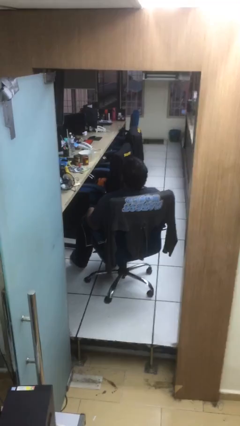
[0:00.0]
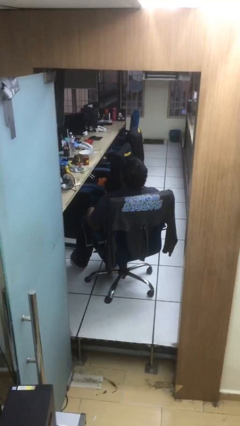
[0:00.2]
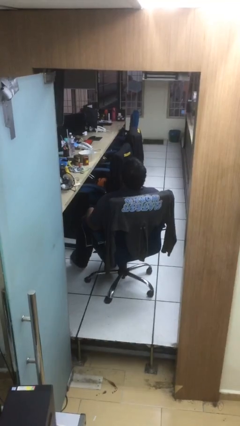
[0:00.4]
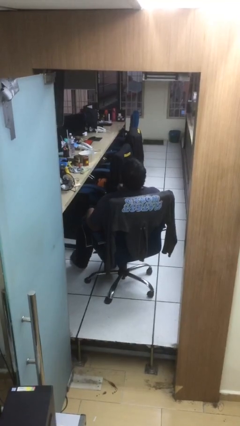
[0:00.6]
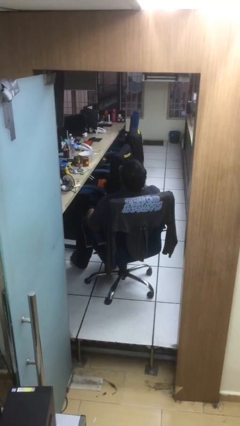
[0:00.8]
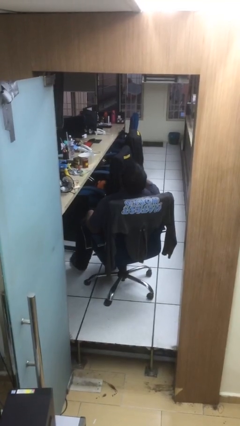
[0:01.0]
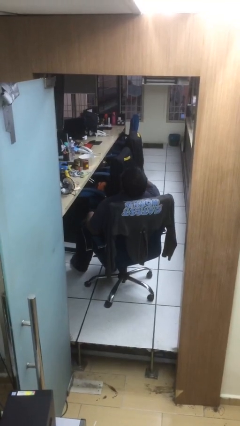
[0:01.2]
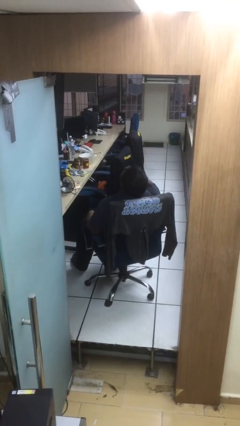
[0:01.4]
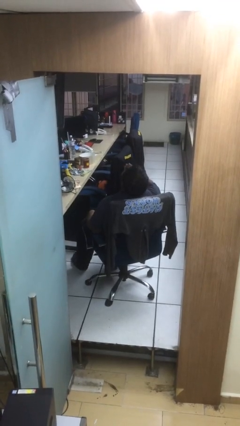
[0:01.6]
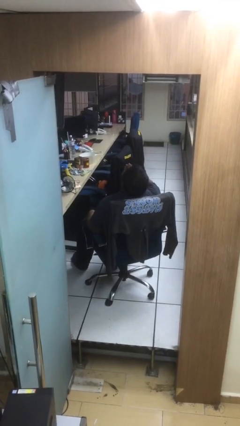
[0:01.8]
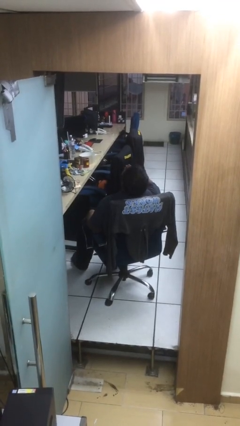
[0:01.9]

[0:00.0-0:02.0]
person yawns

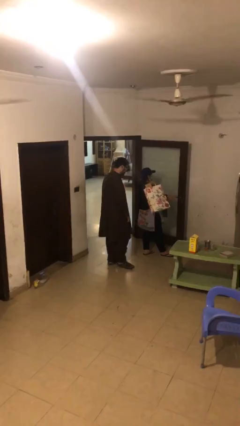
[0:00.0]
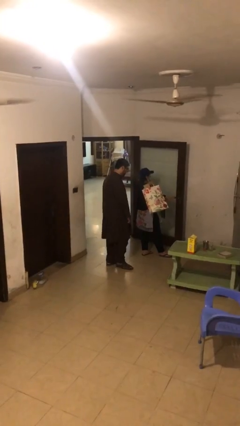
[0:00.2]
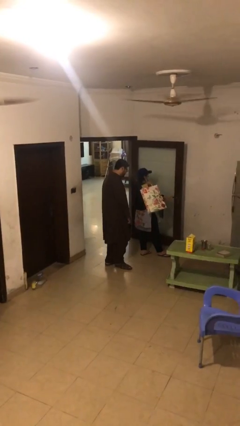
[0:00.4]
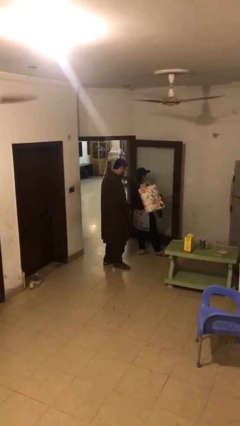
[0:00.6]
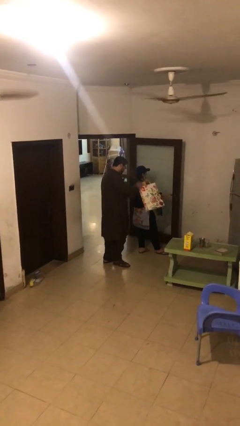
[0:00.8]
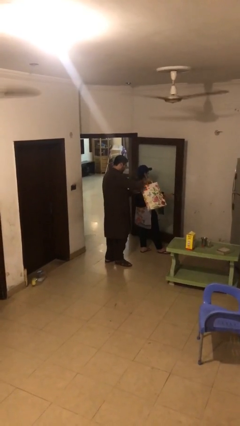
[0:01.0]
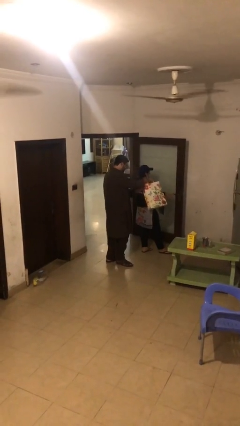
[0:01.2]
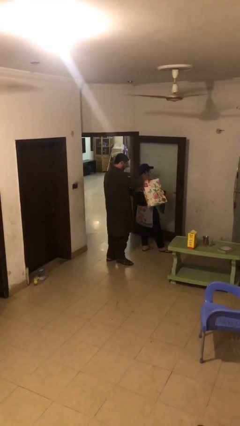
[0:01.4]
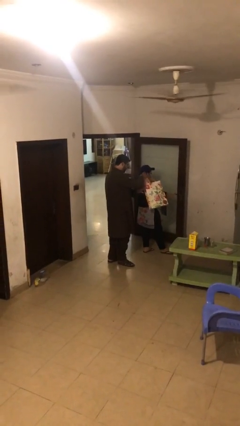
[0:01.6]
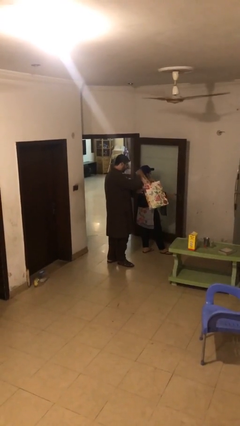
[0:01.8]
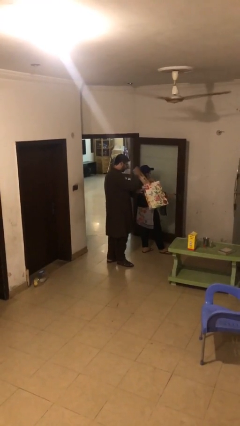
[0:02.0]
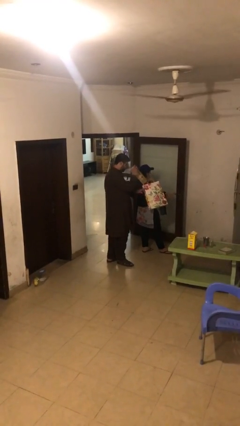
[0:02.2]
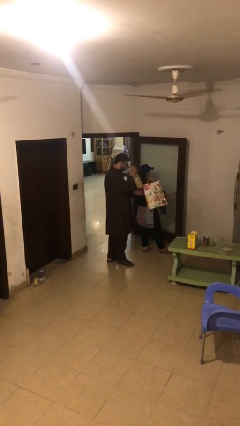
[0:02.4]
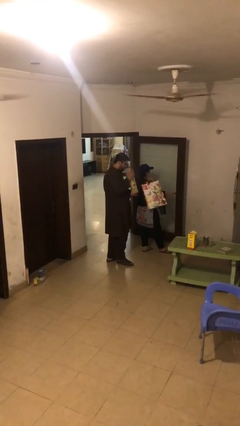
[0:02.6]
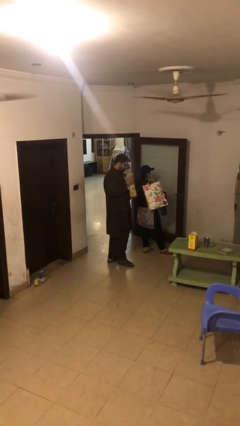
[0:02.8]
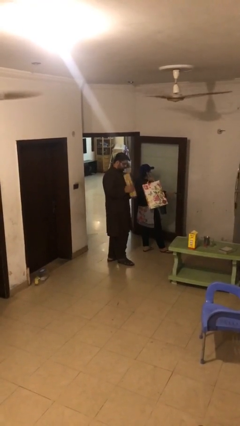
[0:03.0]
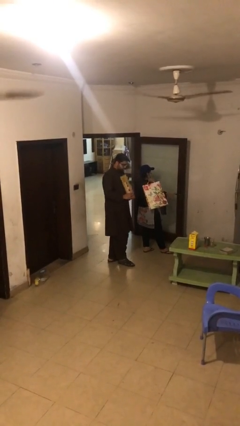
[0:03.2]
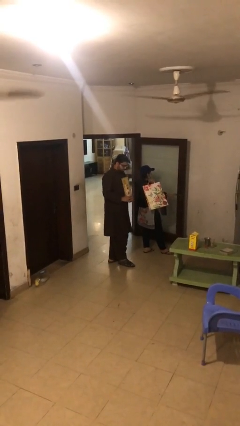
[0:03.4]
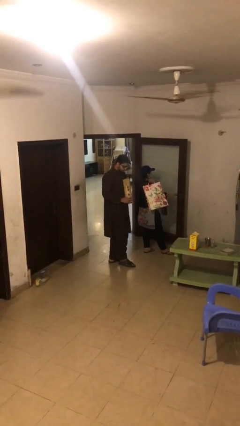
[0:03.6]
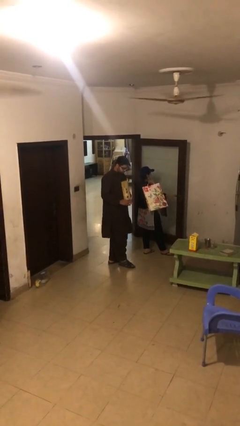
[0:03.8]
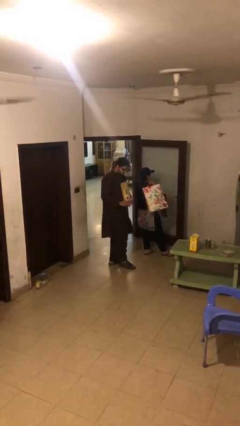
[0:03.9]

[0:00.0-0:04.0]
person steals object from person

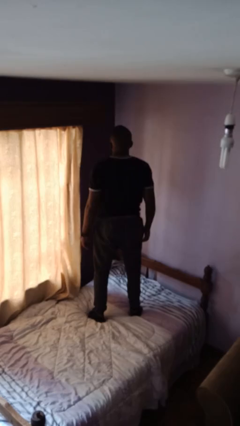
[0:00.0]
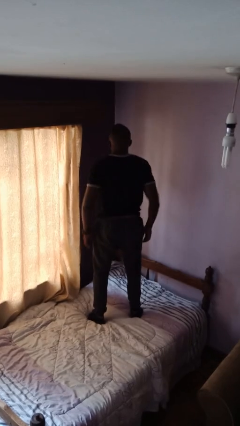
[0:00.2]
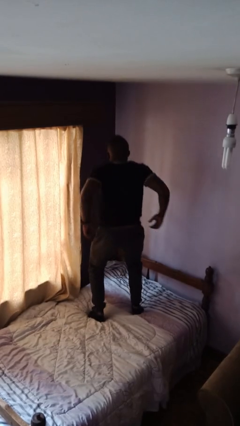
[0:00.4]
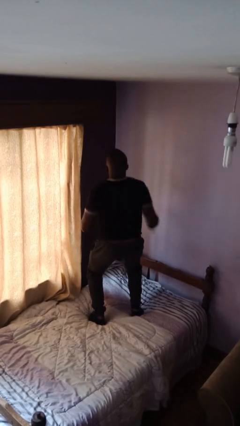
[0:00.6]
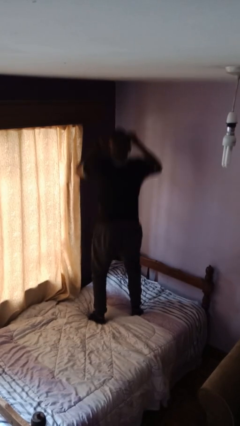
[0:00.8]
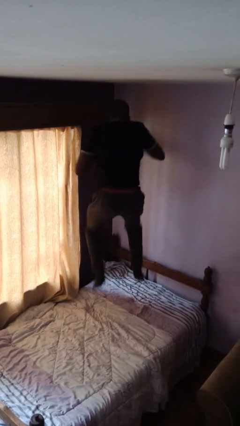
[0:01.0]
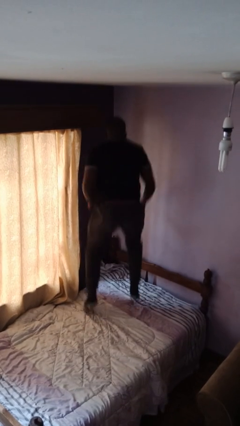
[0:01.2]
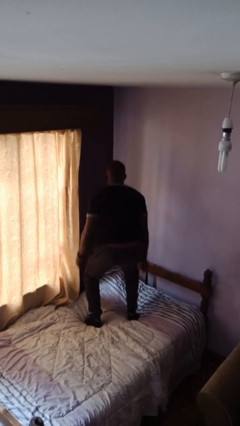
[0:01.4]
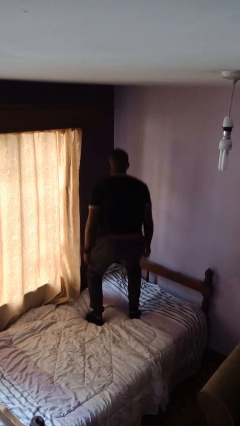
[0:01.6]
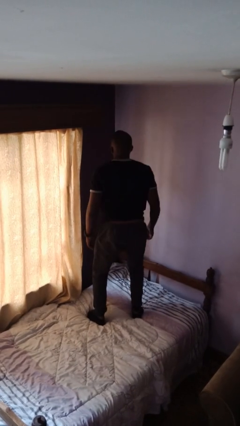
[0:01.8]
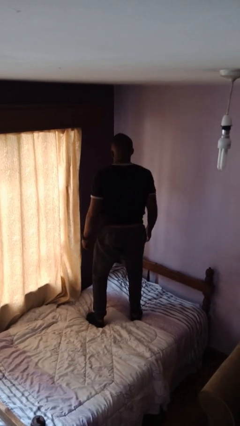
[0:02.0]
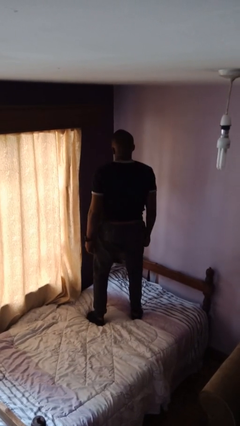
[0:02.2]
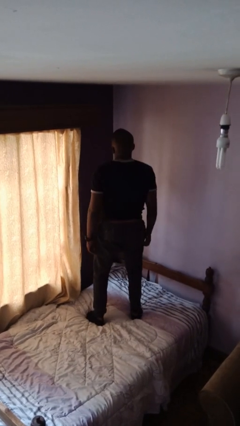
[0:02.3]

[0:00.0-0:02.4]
person jumps on bed

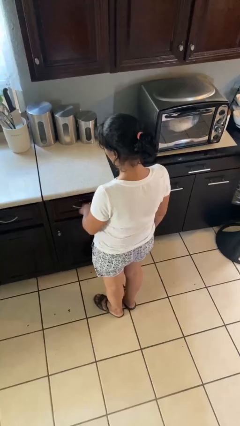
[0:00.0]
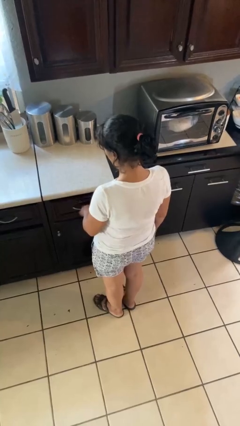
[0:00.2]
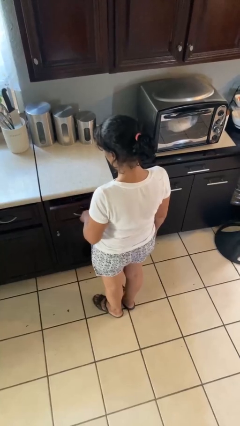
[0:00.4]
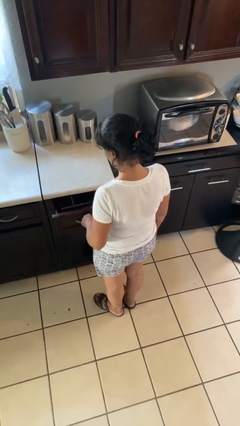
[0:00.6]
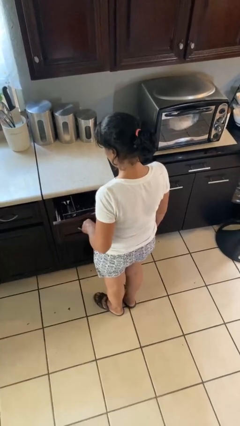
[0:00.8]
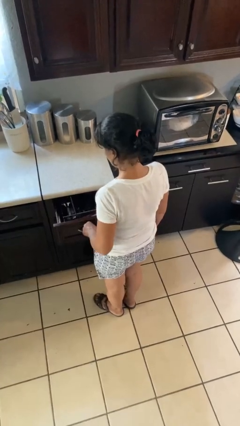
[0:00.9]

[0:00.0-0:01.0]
person opens kitchen drawer

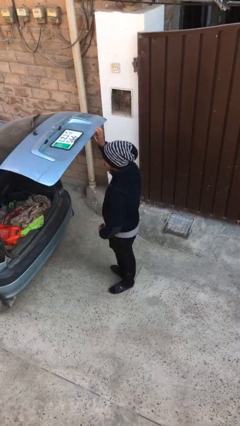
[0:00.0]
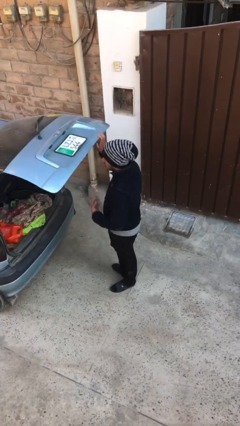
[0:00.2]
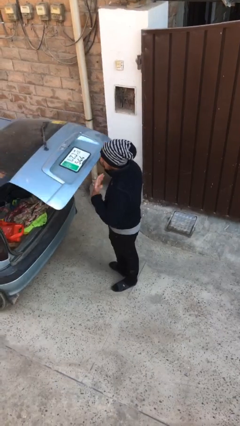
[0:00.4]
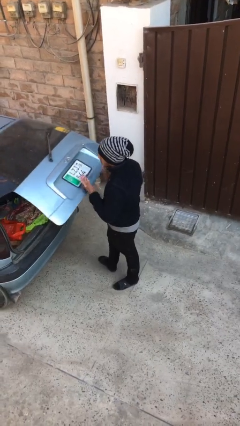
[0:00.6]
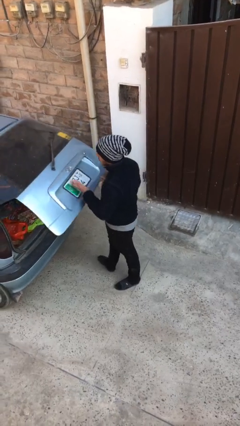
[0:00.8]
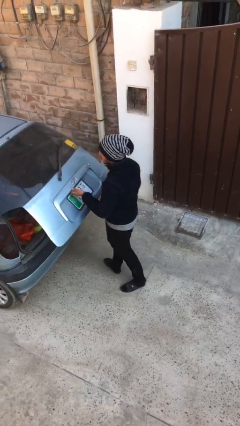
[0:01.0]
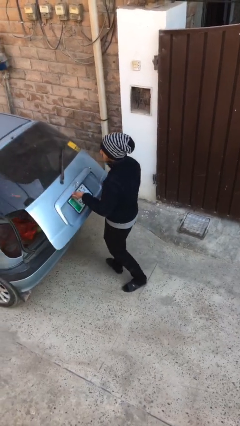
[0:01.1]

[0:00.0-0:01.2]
person closes car trunk

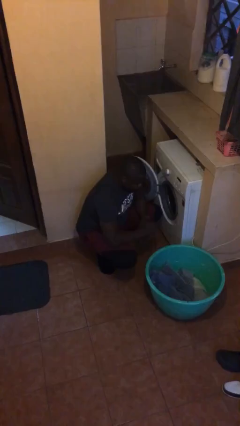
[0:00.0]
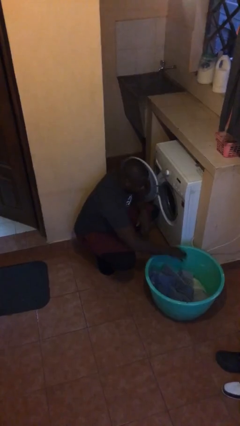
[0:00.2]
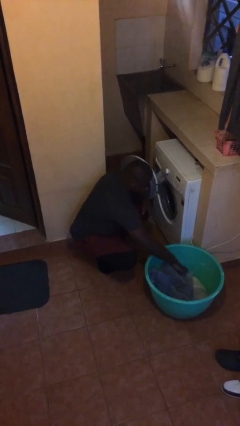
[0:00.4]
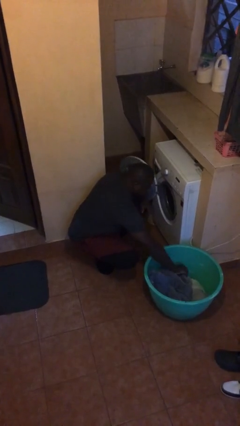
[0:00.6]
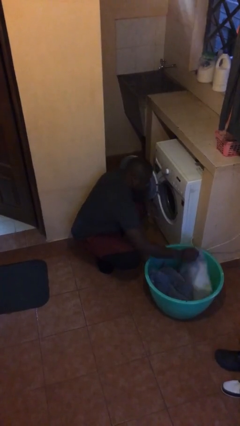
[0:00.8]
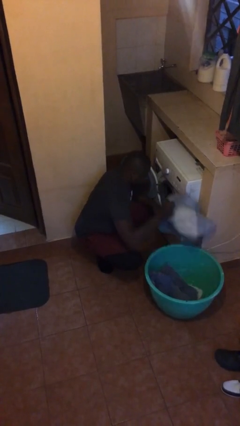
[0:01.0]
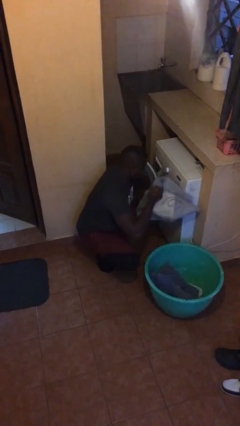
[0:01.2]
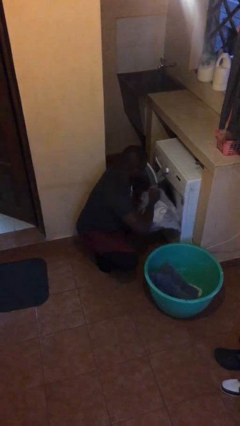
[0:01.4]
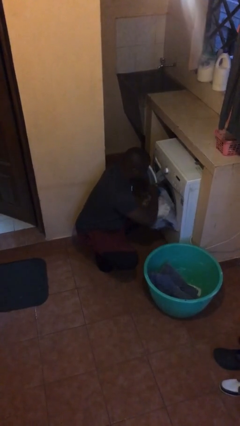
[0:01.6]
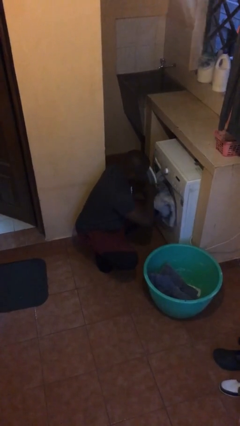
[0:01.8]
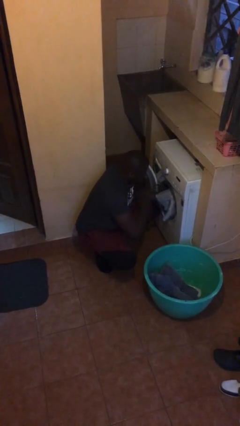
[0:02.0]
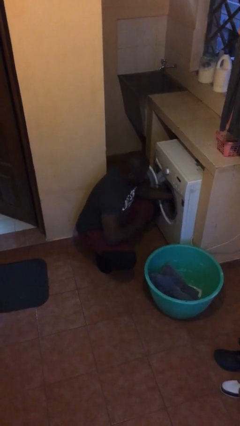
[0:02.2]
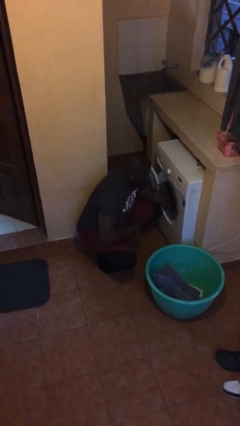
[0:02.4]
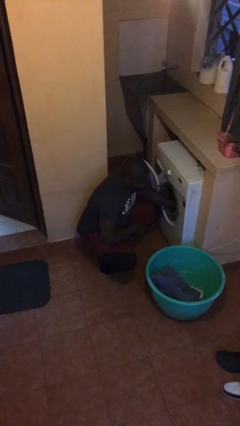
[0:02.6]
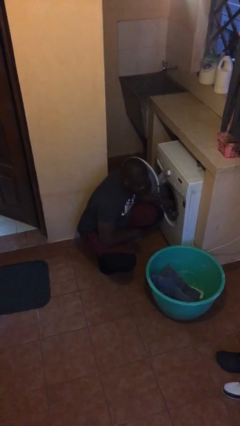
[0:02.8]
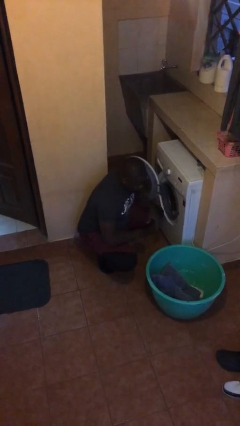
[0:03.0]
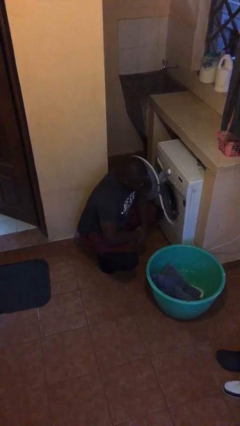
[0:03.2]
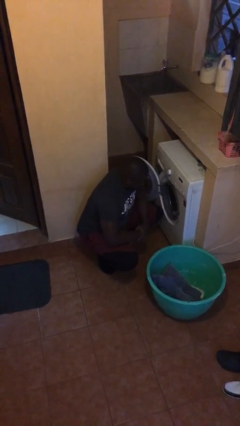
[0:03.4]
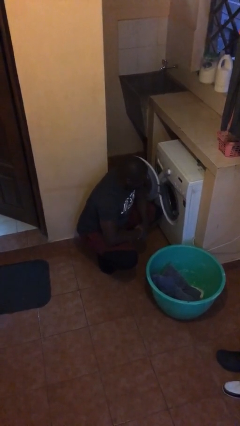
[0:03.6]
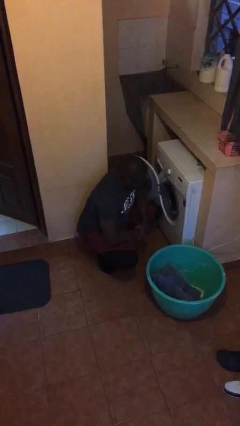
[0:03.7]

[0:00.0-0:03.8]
person loads dryer

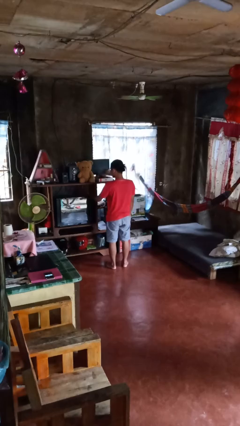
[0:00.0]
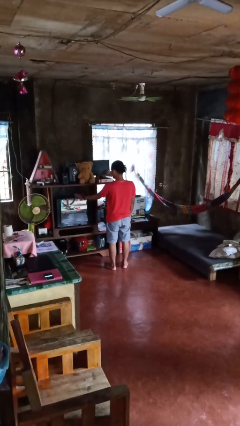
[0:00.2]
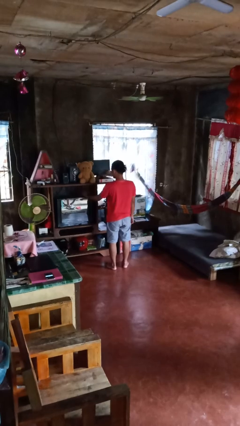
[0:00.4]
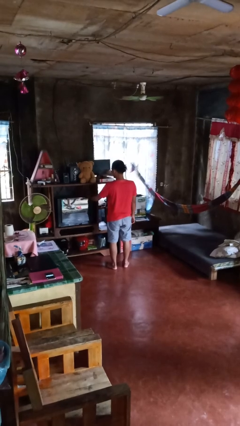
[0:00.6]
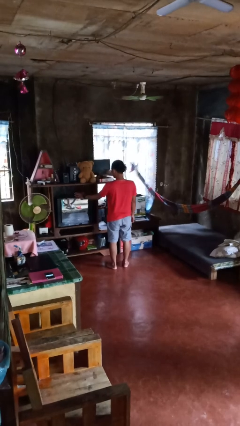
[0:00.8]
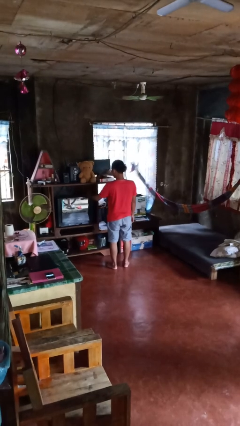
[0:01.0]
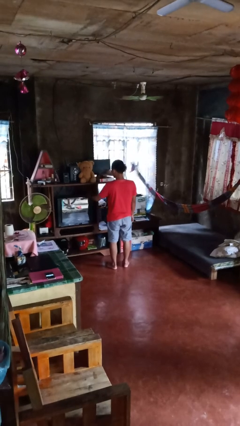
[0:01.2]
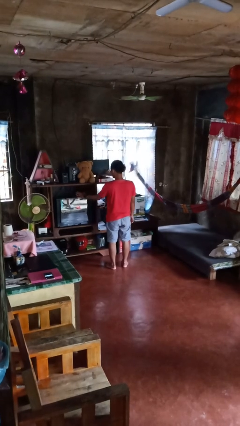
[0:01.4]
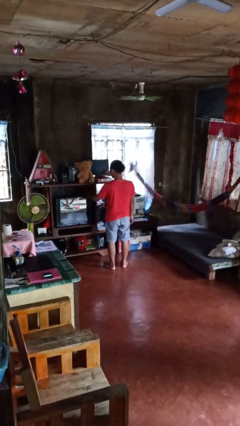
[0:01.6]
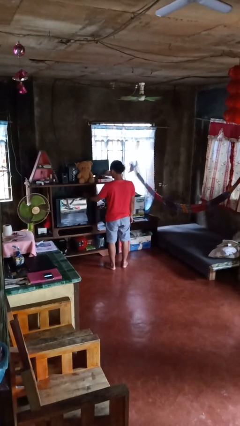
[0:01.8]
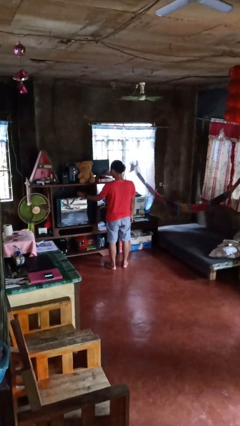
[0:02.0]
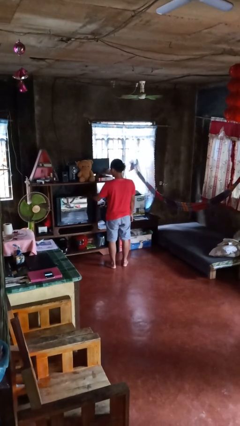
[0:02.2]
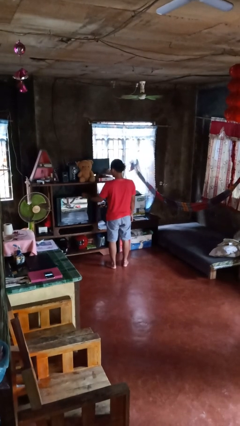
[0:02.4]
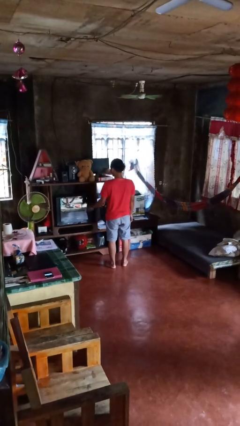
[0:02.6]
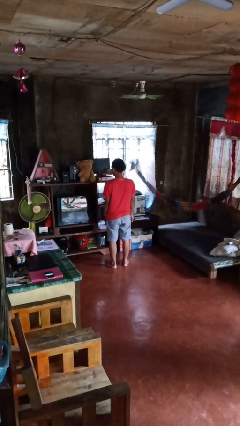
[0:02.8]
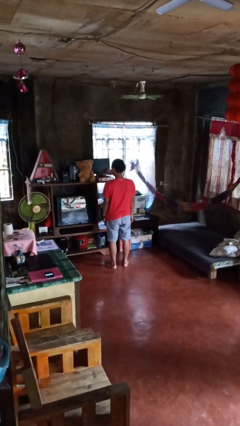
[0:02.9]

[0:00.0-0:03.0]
person waves hand over object
